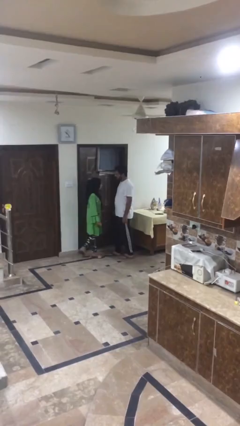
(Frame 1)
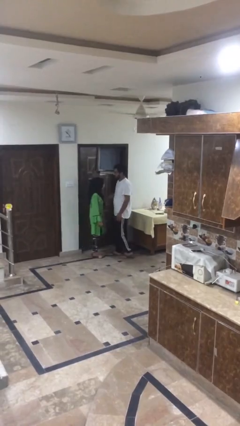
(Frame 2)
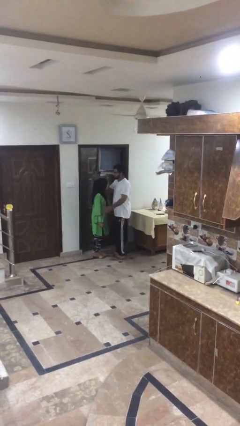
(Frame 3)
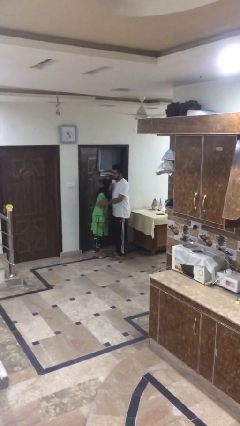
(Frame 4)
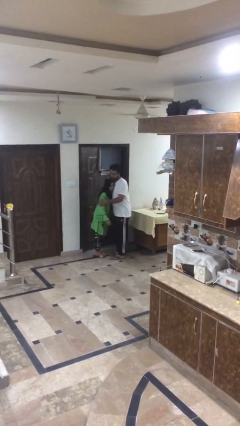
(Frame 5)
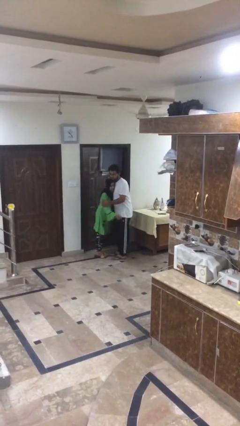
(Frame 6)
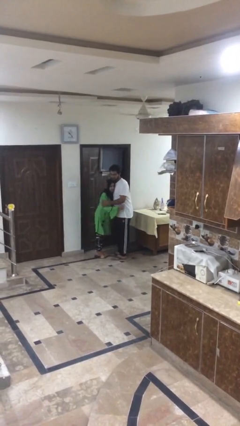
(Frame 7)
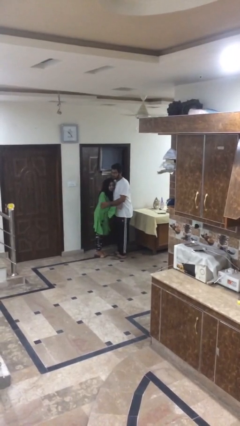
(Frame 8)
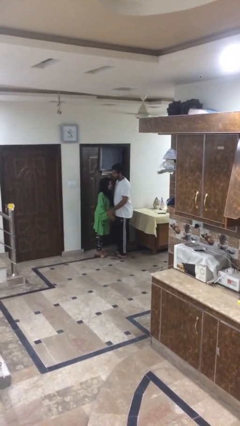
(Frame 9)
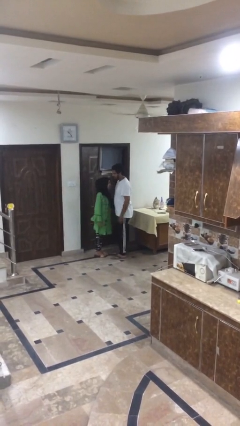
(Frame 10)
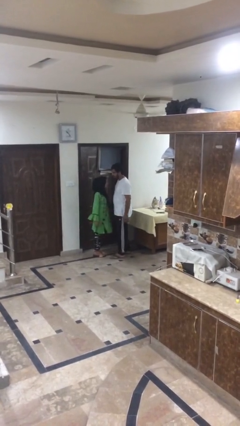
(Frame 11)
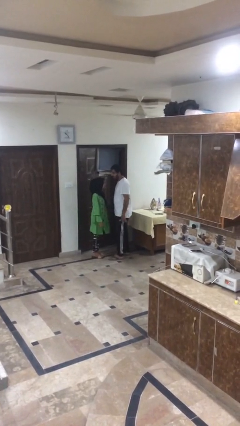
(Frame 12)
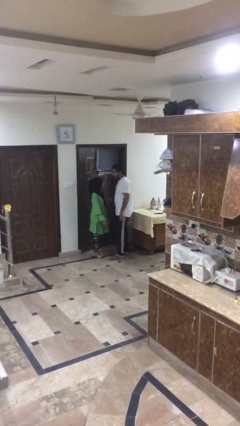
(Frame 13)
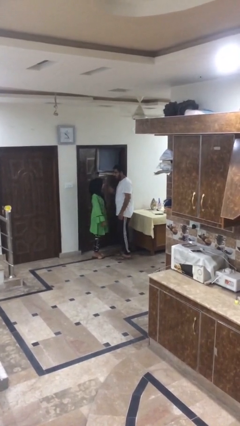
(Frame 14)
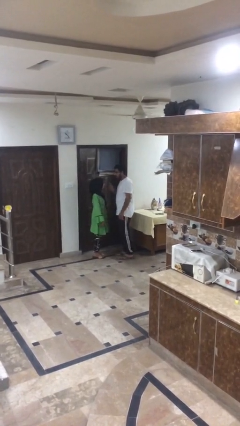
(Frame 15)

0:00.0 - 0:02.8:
person embraces person

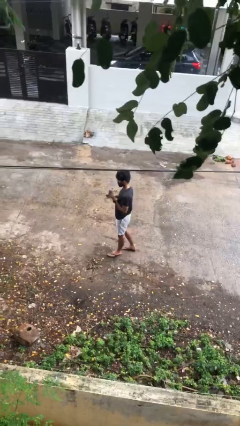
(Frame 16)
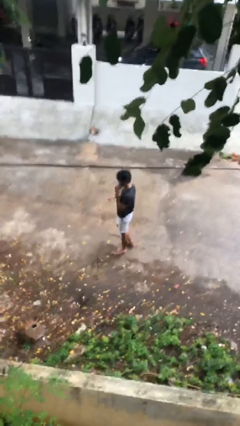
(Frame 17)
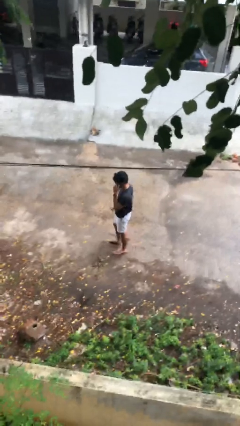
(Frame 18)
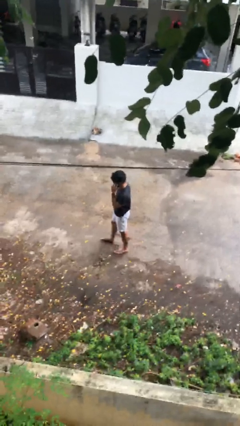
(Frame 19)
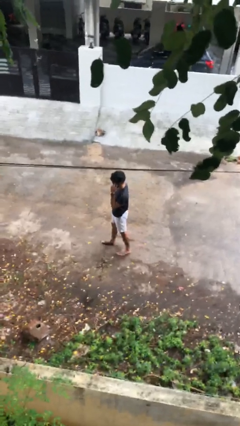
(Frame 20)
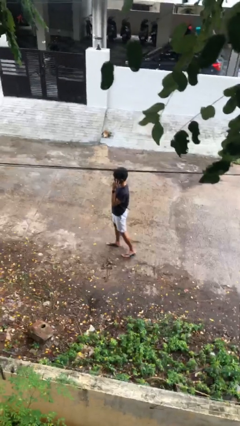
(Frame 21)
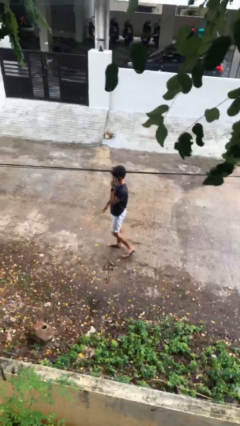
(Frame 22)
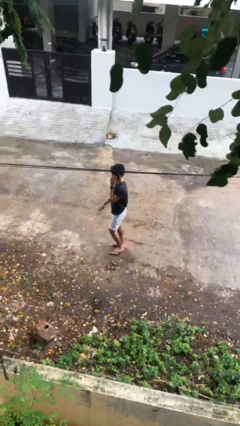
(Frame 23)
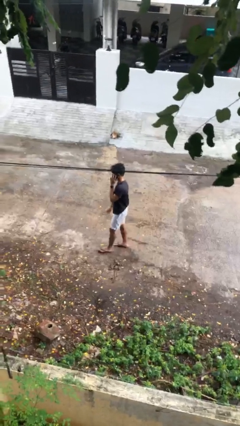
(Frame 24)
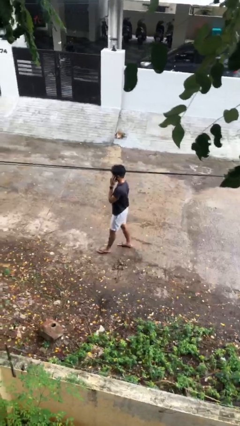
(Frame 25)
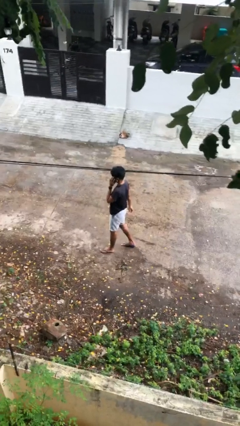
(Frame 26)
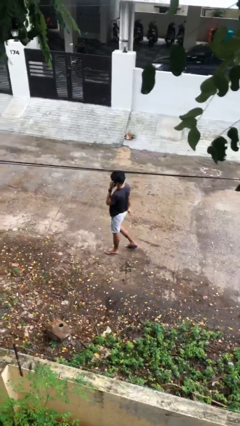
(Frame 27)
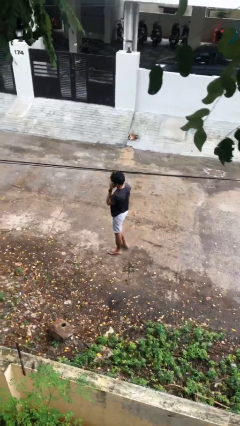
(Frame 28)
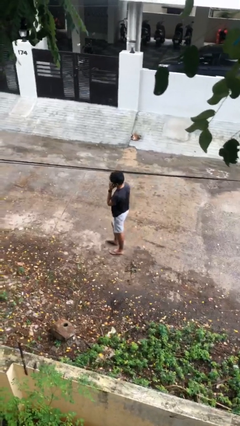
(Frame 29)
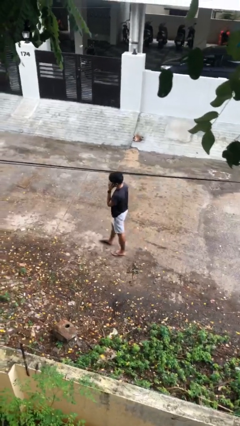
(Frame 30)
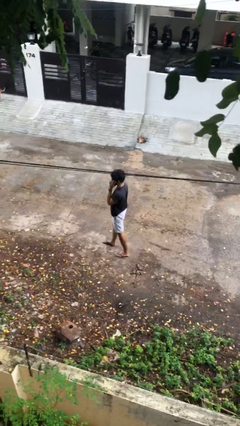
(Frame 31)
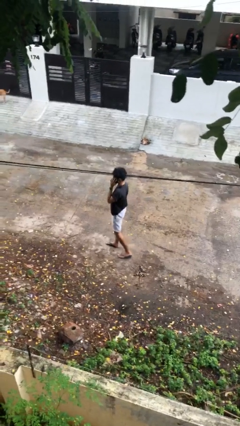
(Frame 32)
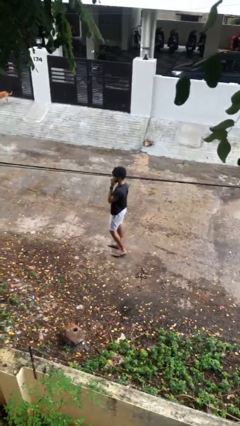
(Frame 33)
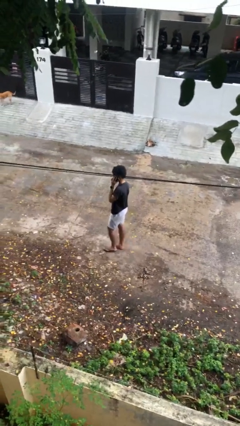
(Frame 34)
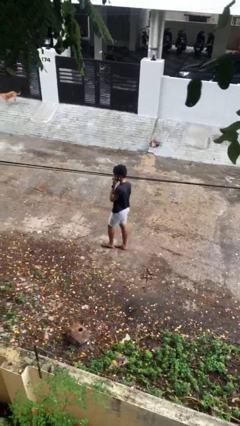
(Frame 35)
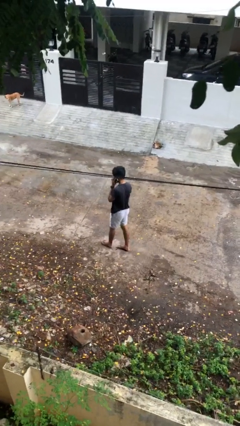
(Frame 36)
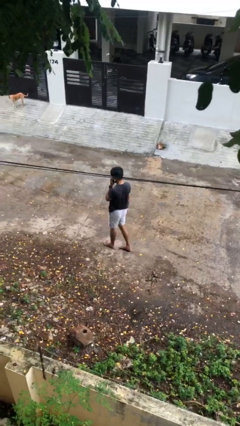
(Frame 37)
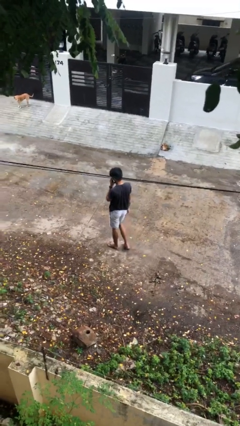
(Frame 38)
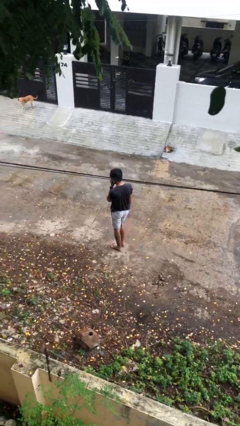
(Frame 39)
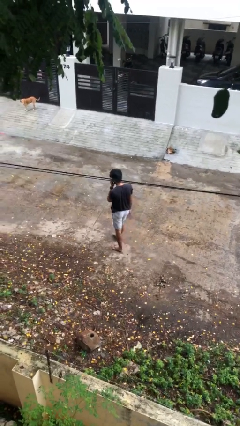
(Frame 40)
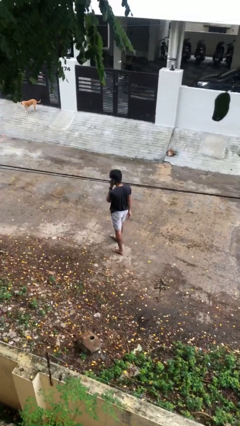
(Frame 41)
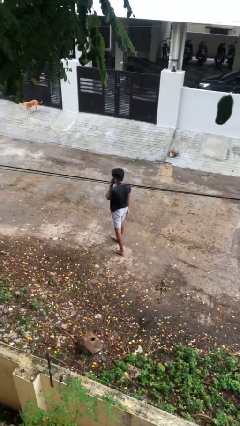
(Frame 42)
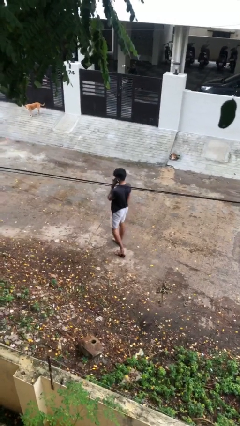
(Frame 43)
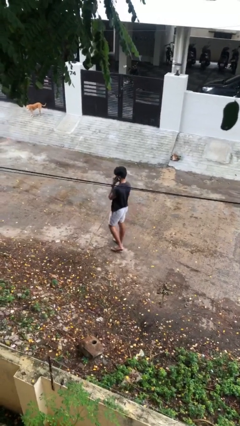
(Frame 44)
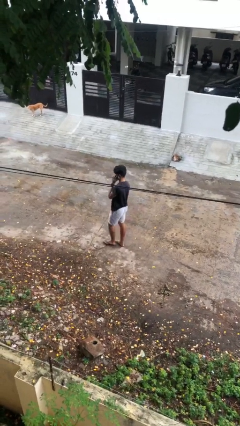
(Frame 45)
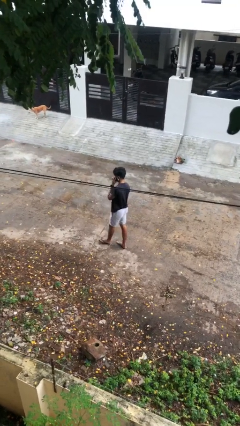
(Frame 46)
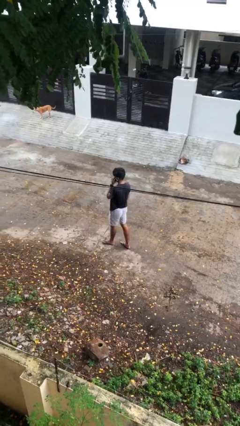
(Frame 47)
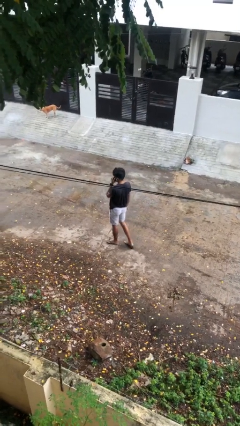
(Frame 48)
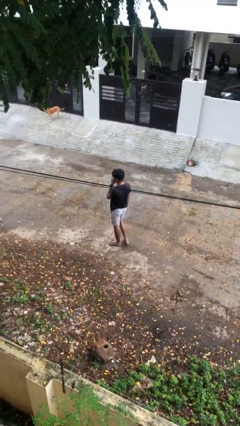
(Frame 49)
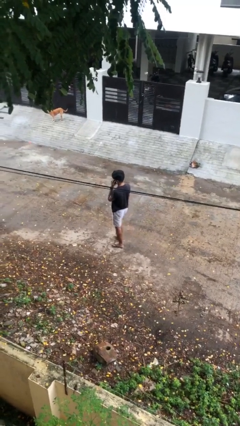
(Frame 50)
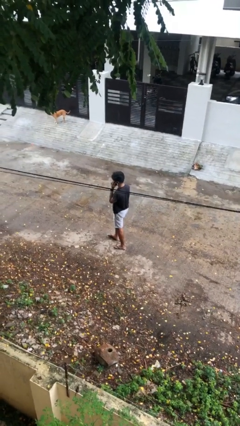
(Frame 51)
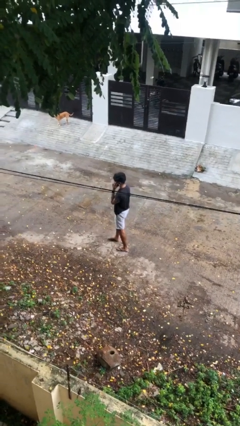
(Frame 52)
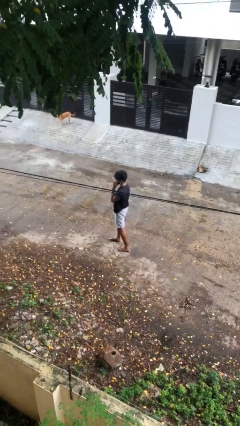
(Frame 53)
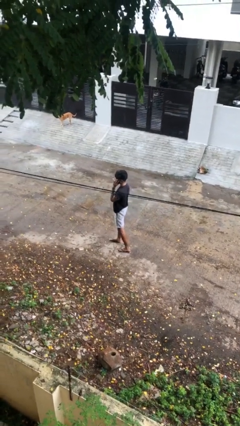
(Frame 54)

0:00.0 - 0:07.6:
person talks on phone

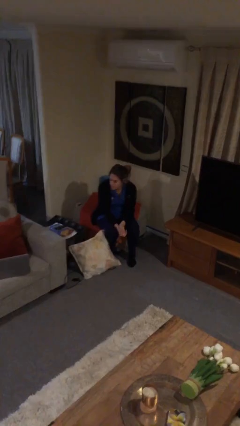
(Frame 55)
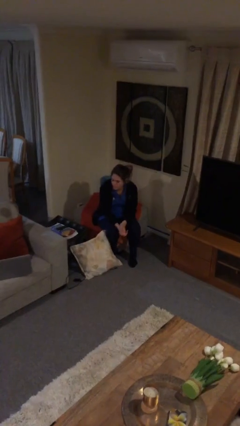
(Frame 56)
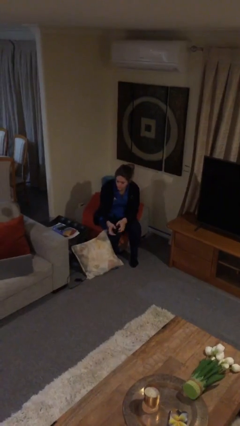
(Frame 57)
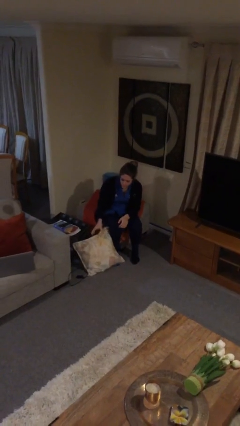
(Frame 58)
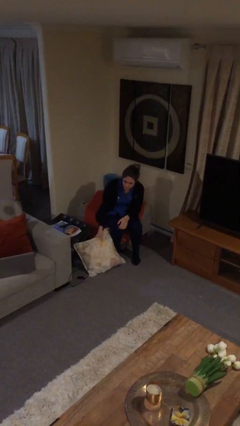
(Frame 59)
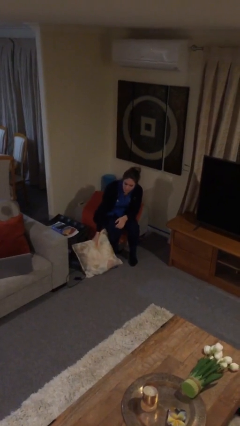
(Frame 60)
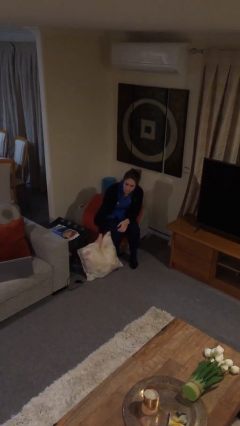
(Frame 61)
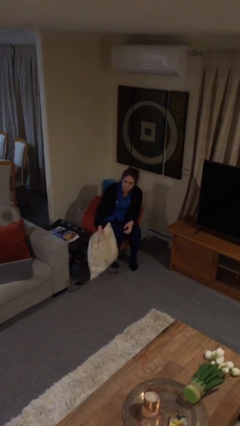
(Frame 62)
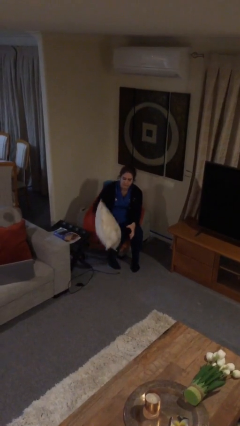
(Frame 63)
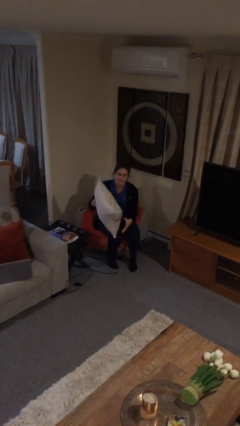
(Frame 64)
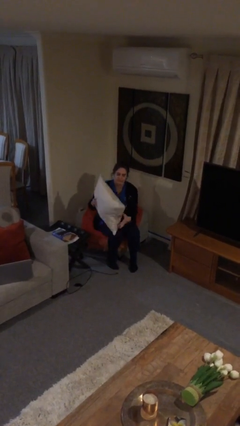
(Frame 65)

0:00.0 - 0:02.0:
person picks up object from floor

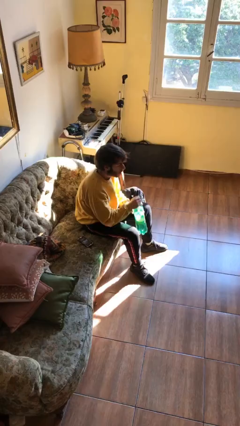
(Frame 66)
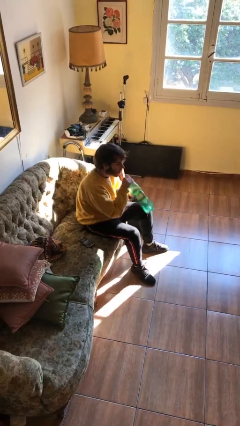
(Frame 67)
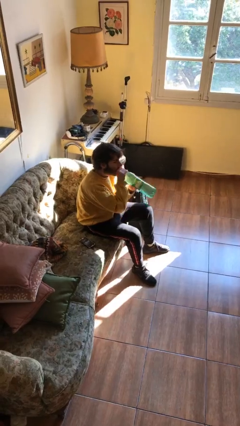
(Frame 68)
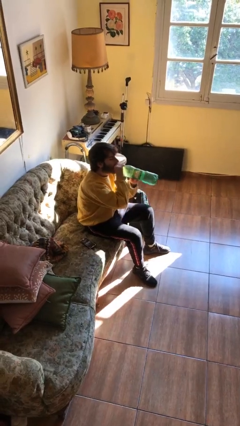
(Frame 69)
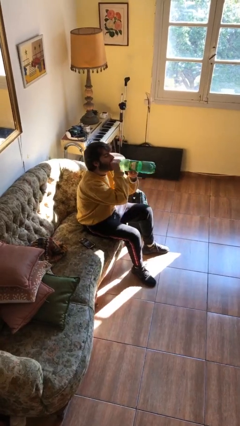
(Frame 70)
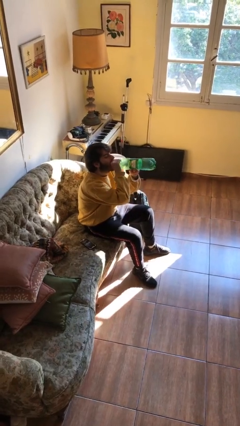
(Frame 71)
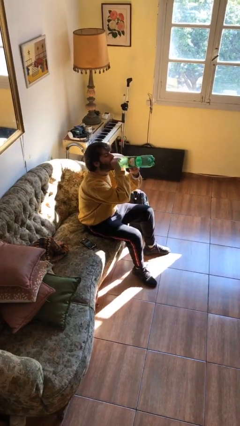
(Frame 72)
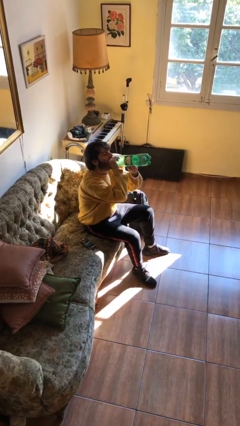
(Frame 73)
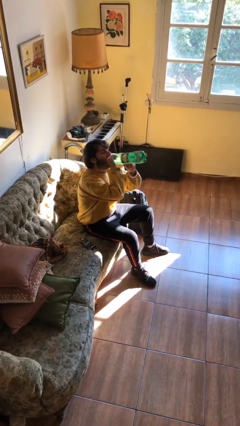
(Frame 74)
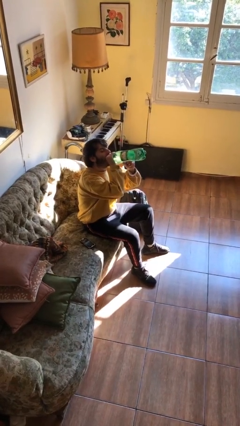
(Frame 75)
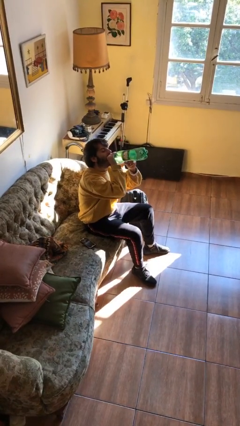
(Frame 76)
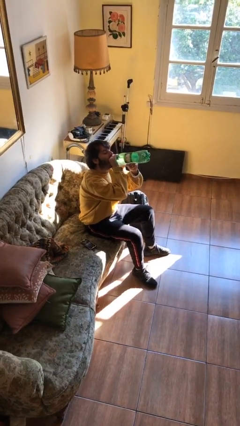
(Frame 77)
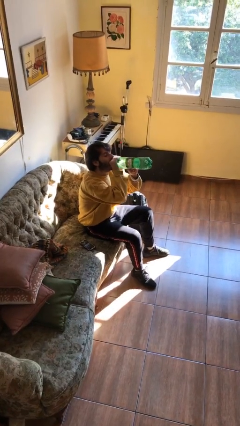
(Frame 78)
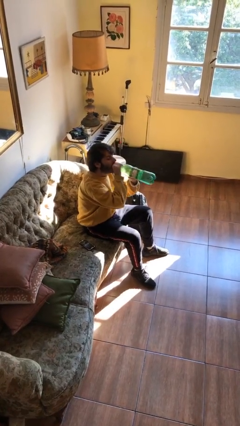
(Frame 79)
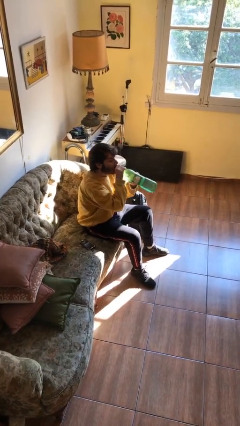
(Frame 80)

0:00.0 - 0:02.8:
person drinks from bottle

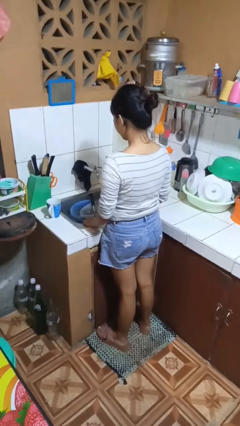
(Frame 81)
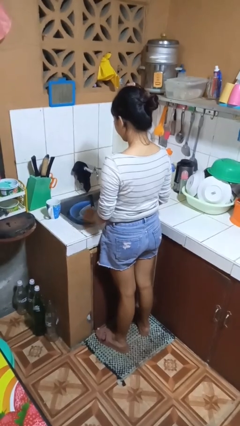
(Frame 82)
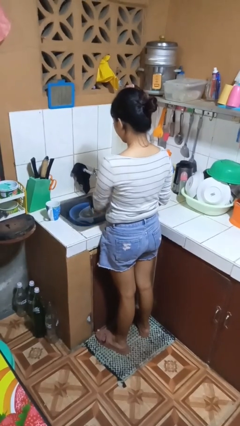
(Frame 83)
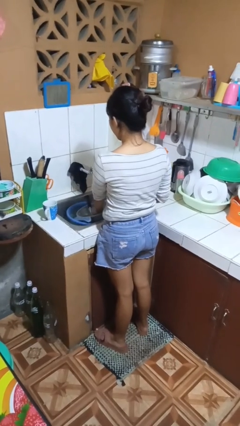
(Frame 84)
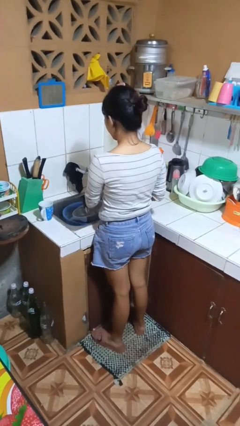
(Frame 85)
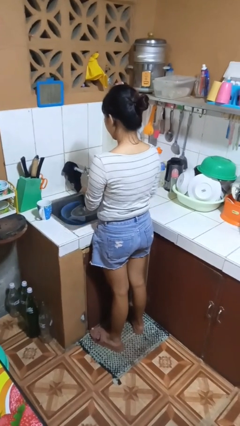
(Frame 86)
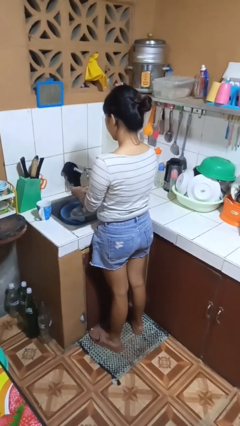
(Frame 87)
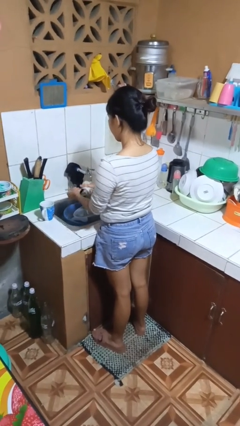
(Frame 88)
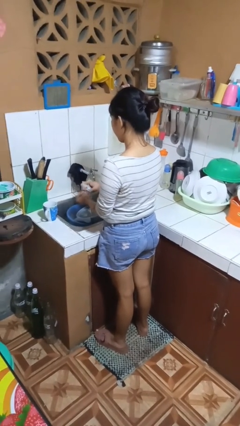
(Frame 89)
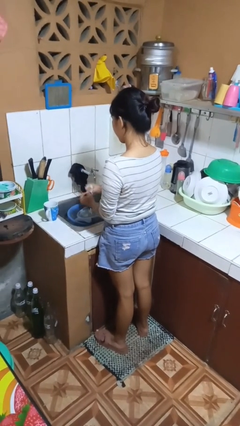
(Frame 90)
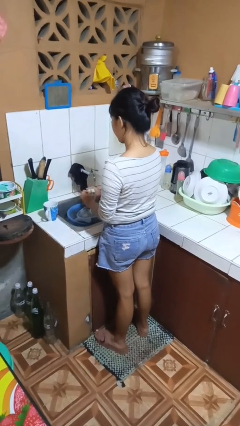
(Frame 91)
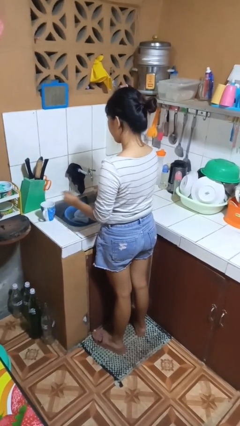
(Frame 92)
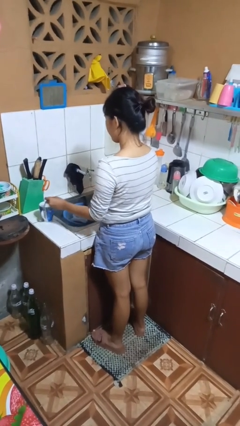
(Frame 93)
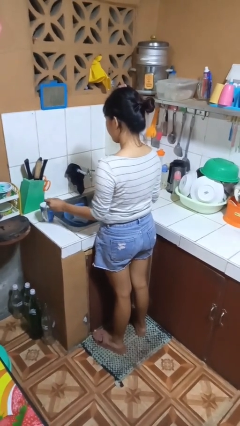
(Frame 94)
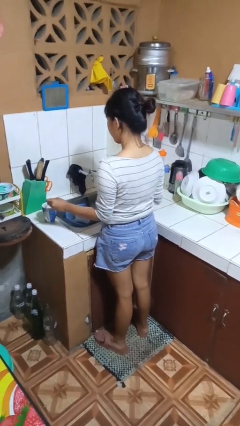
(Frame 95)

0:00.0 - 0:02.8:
person washes dish
